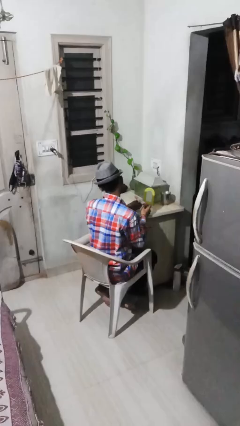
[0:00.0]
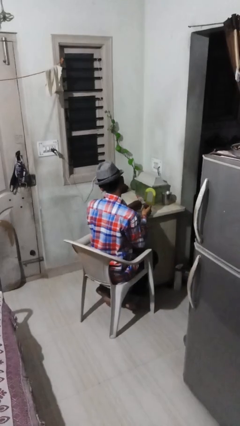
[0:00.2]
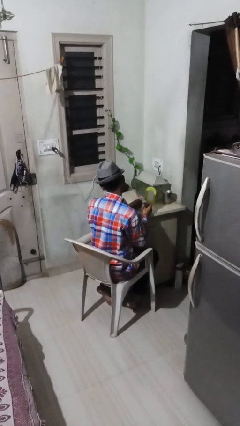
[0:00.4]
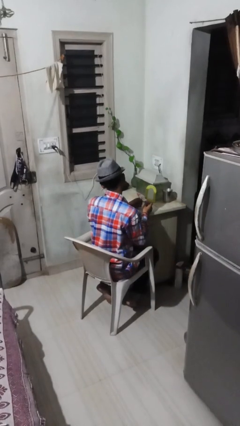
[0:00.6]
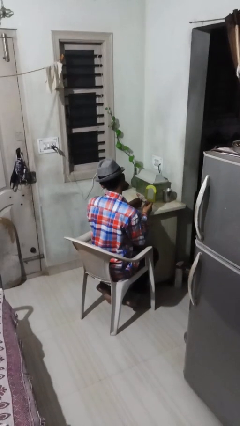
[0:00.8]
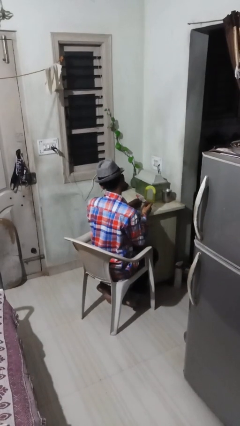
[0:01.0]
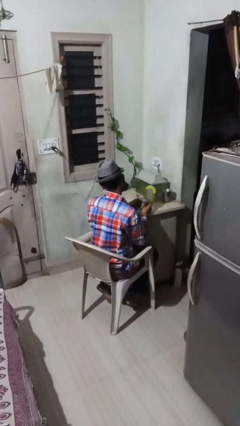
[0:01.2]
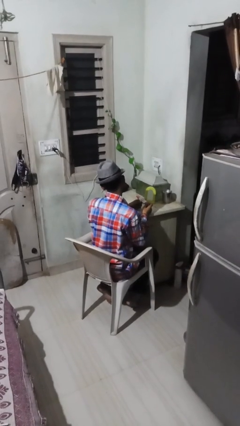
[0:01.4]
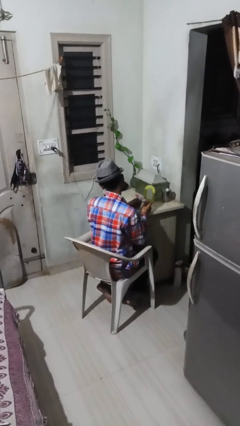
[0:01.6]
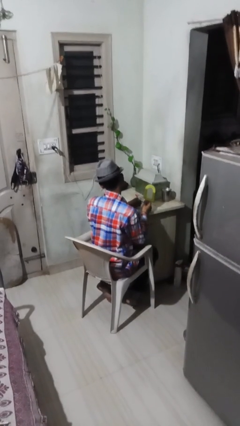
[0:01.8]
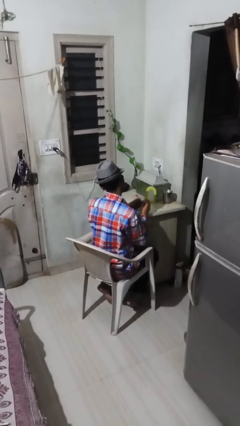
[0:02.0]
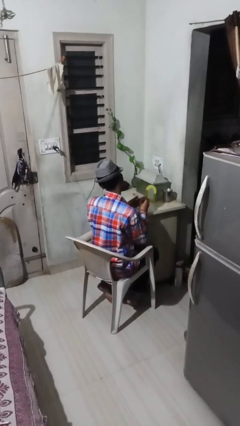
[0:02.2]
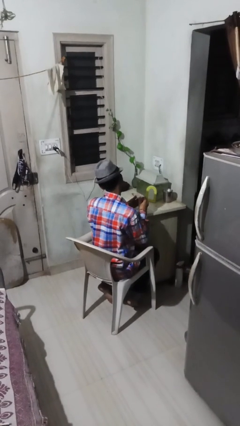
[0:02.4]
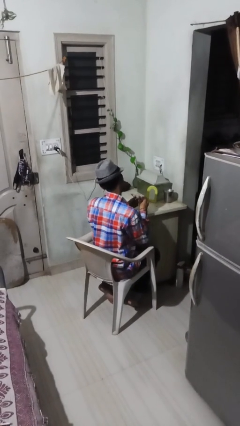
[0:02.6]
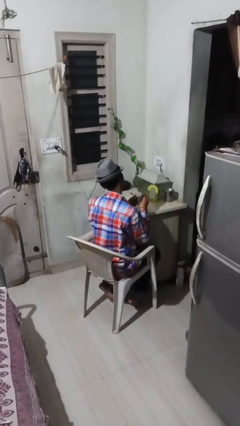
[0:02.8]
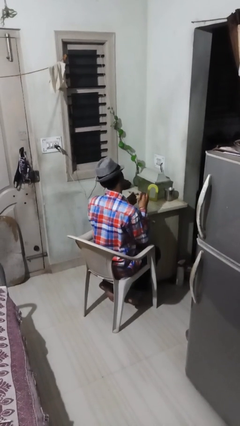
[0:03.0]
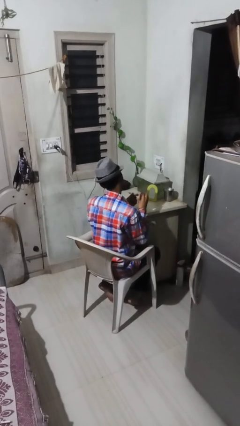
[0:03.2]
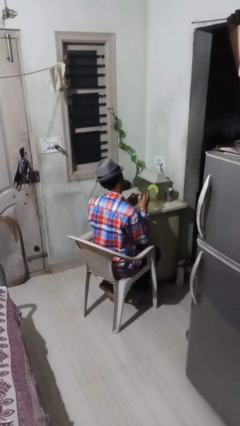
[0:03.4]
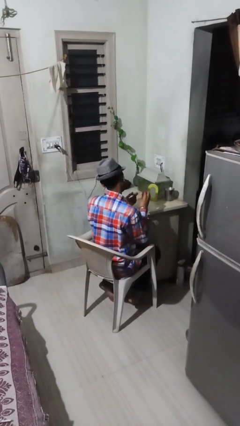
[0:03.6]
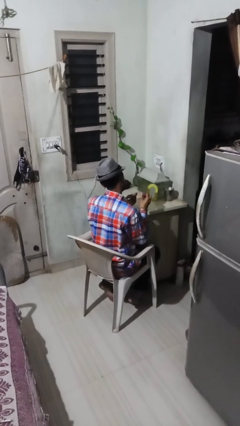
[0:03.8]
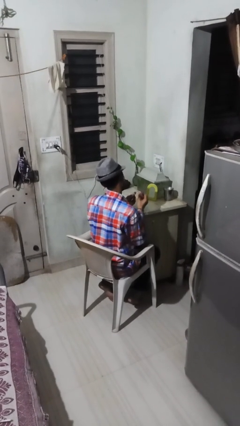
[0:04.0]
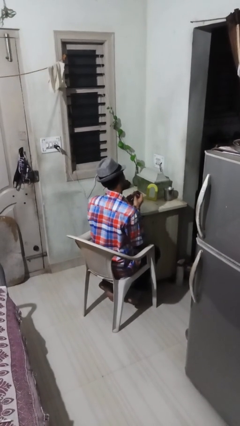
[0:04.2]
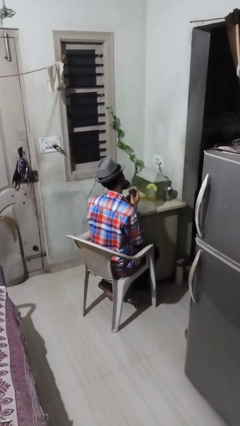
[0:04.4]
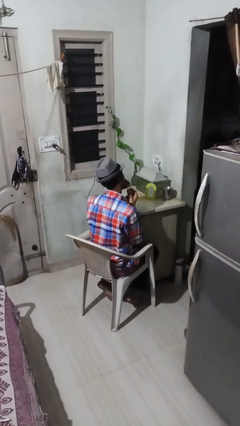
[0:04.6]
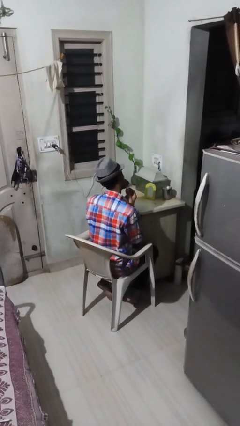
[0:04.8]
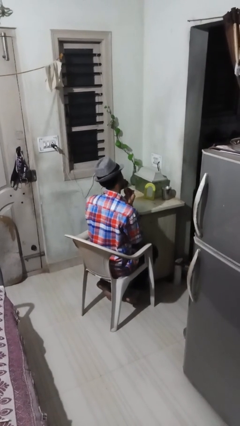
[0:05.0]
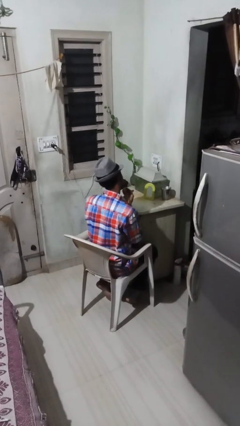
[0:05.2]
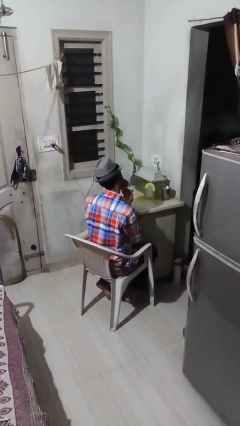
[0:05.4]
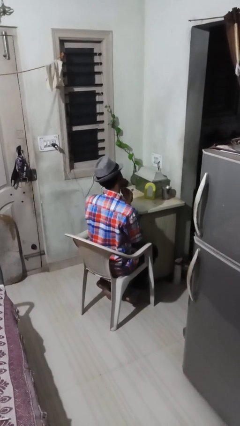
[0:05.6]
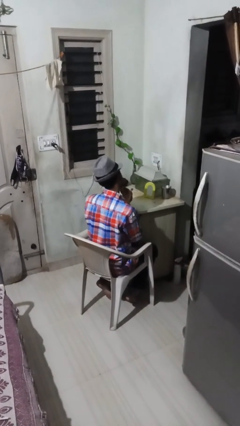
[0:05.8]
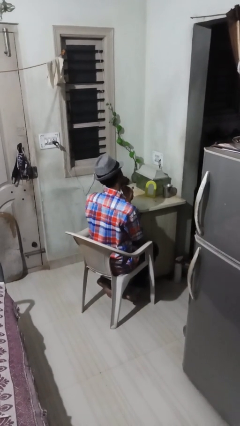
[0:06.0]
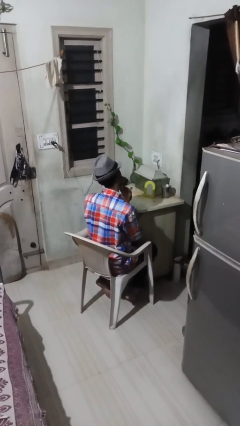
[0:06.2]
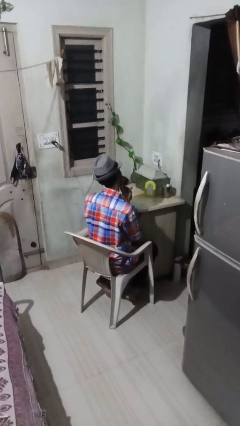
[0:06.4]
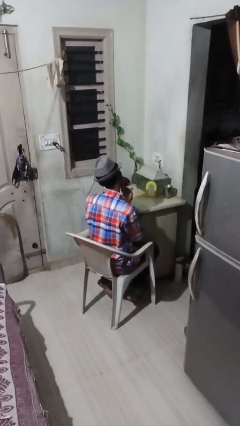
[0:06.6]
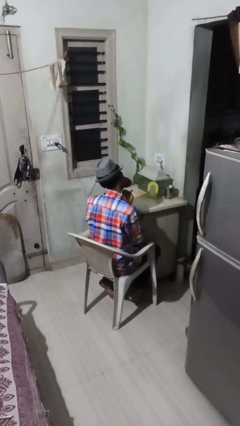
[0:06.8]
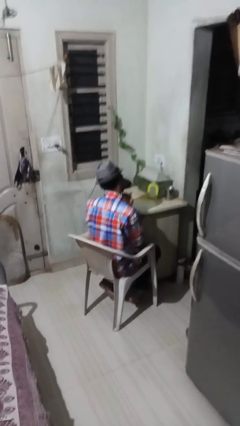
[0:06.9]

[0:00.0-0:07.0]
person applies lip makeup

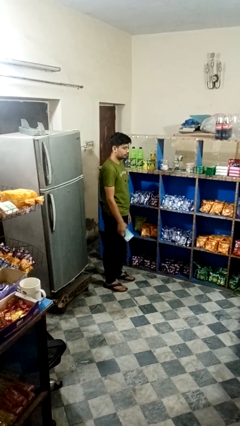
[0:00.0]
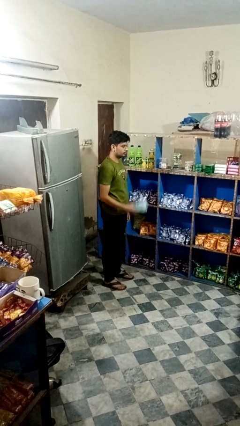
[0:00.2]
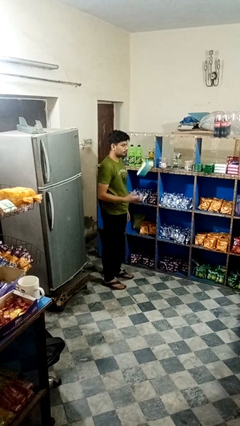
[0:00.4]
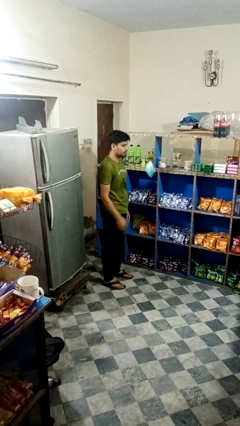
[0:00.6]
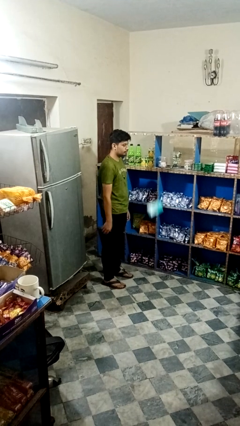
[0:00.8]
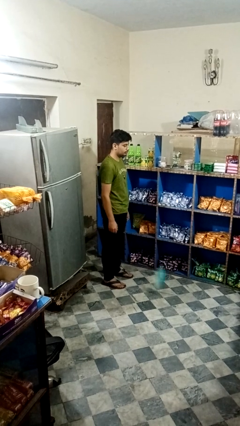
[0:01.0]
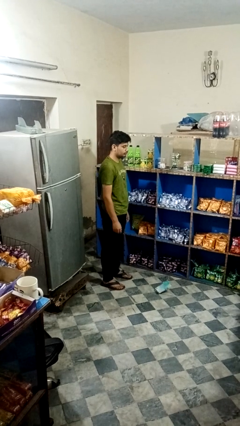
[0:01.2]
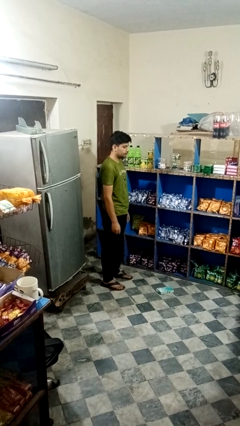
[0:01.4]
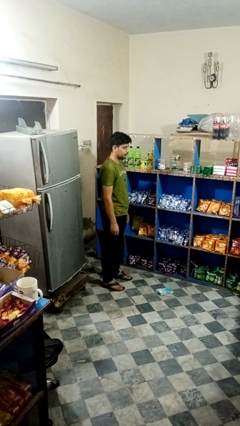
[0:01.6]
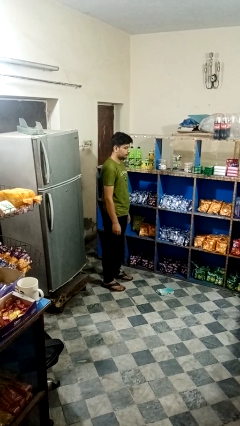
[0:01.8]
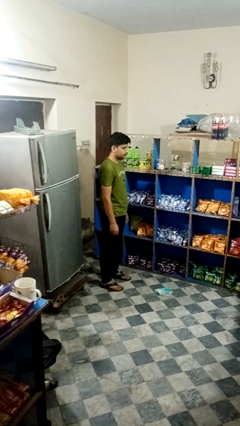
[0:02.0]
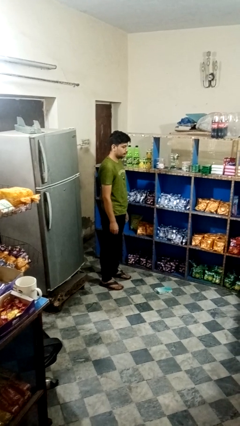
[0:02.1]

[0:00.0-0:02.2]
person throws object into air

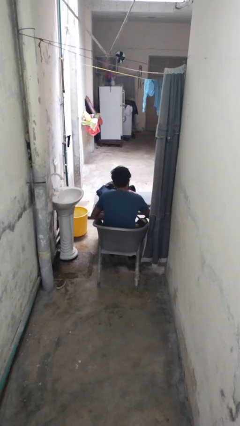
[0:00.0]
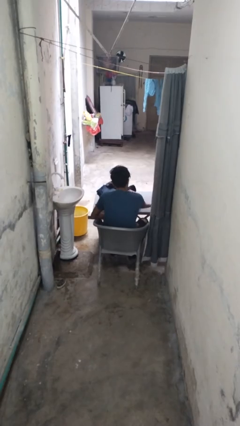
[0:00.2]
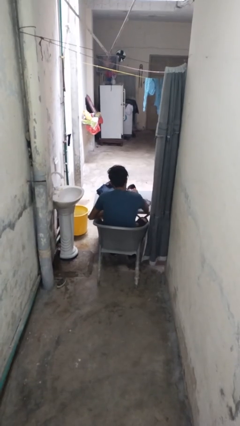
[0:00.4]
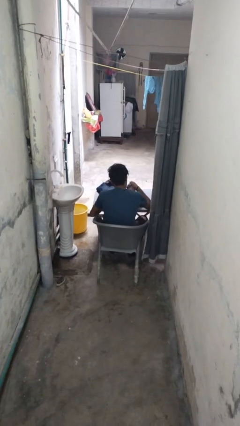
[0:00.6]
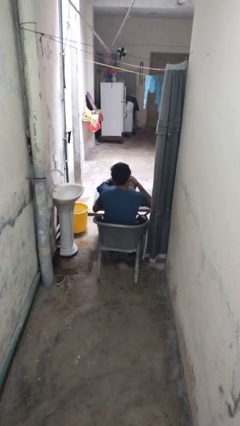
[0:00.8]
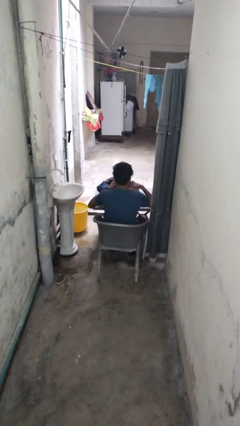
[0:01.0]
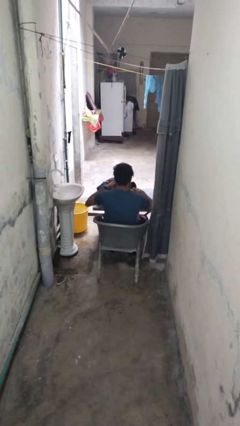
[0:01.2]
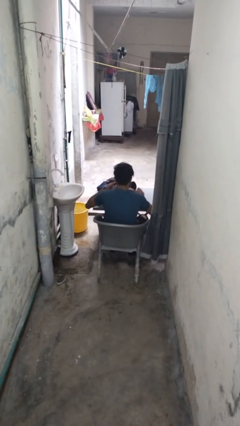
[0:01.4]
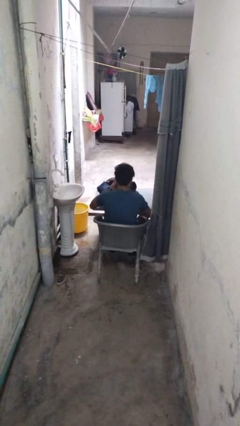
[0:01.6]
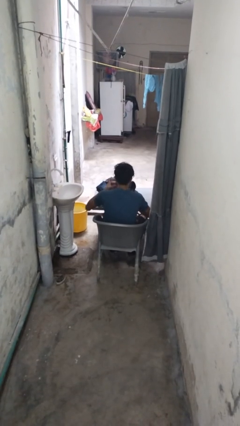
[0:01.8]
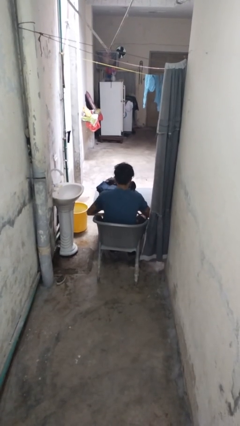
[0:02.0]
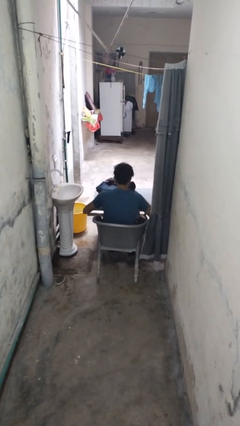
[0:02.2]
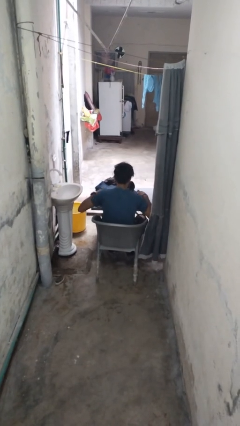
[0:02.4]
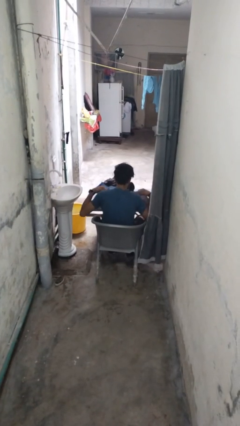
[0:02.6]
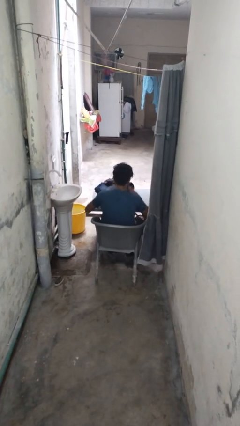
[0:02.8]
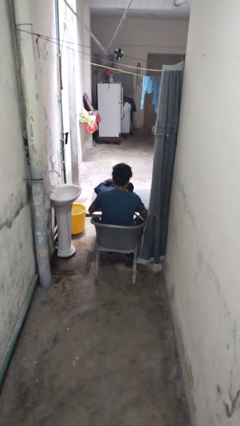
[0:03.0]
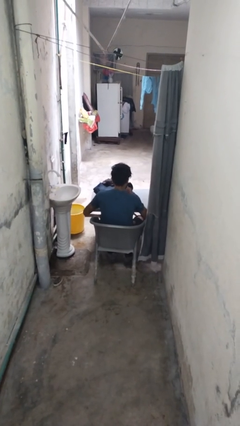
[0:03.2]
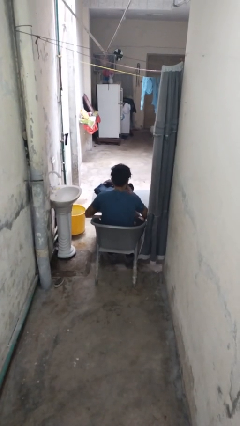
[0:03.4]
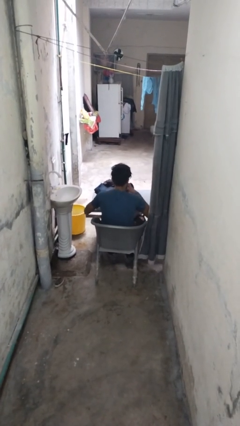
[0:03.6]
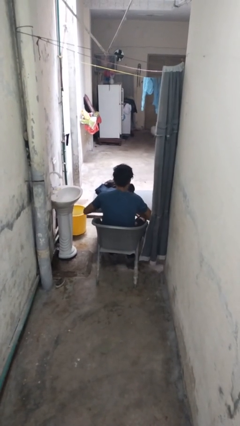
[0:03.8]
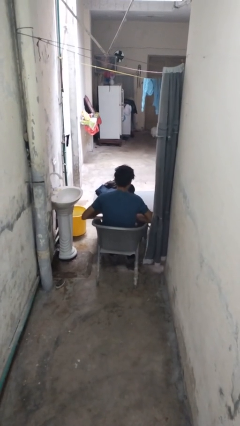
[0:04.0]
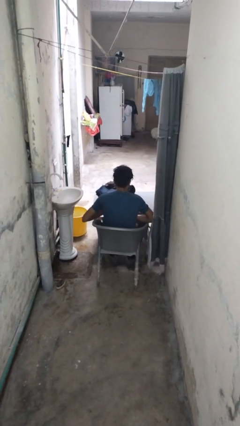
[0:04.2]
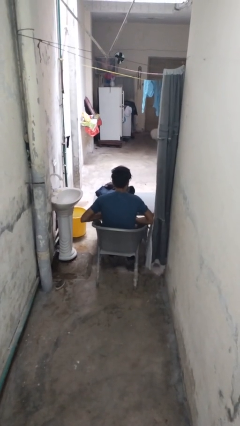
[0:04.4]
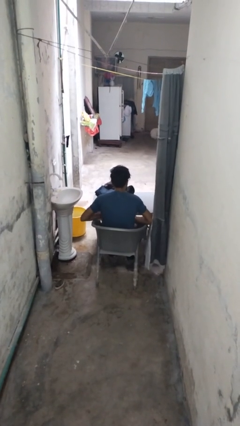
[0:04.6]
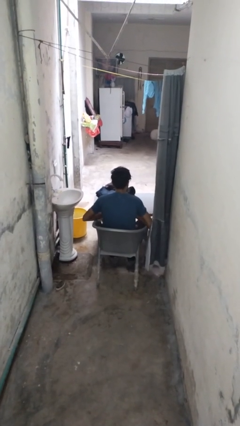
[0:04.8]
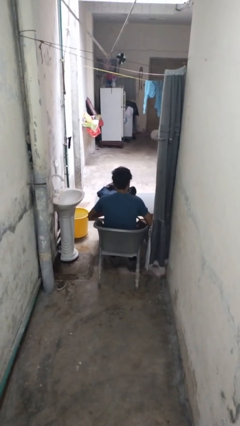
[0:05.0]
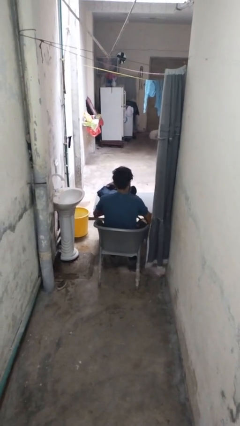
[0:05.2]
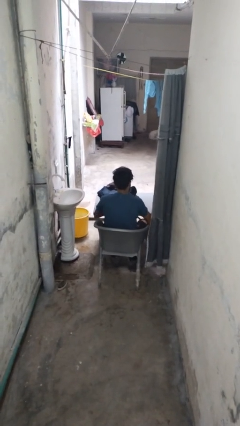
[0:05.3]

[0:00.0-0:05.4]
person folds shirt

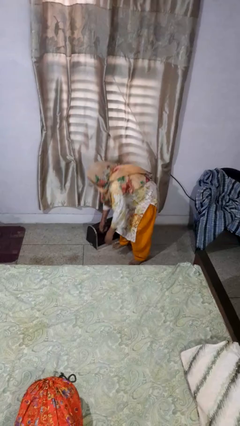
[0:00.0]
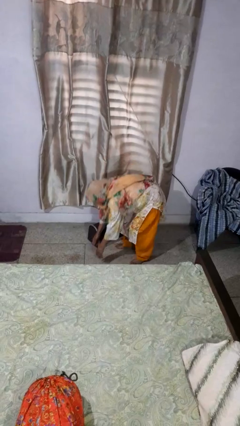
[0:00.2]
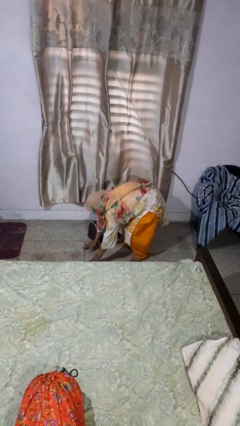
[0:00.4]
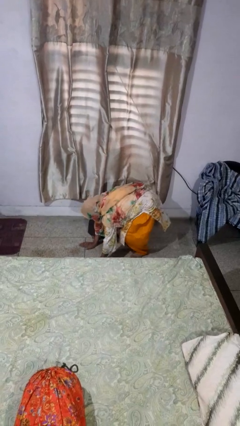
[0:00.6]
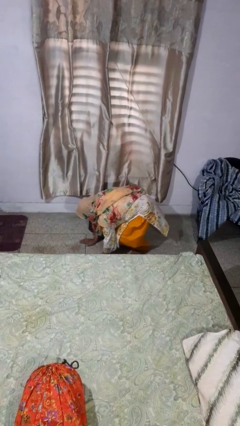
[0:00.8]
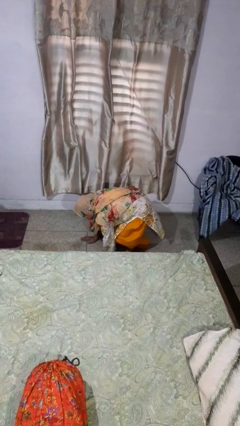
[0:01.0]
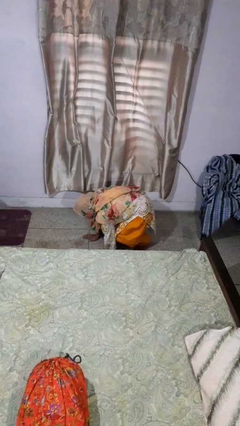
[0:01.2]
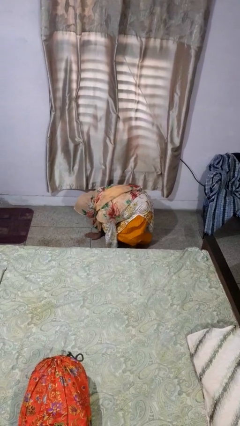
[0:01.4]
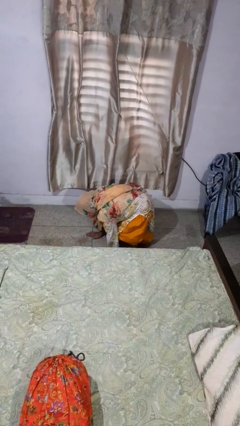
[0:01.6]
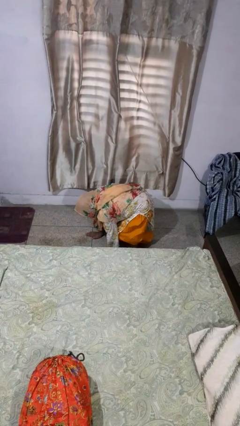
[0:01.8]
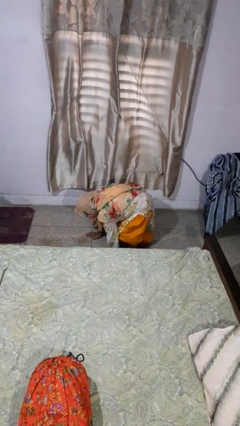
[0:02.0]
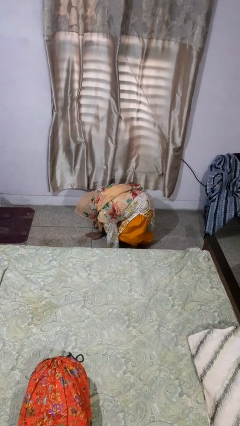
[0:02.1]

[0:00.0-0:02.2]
person lies down on floor

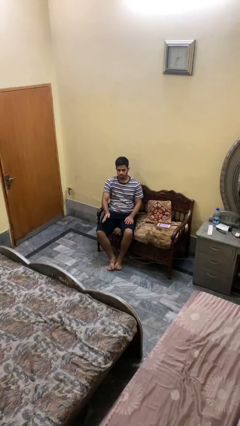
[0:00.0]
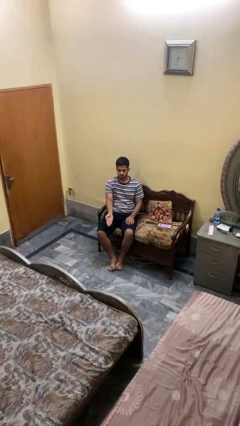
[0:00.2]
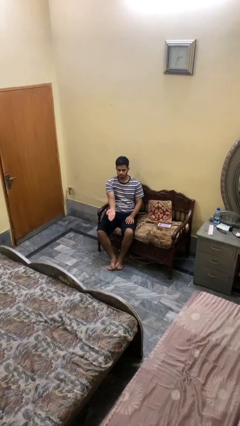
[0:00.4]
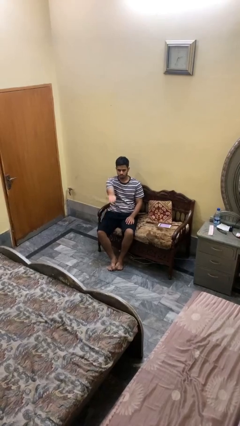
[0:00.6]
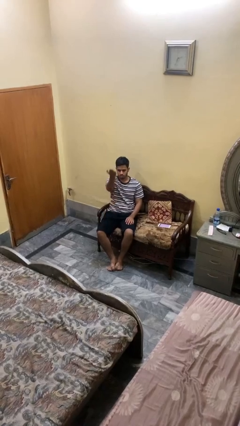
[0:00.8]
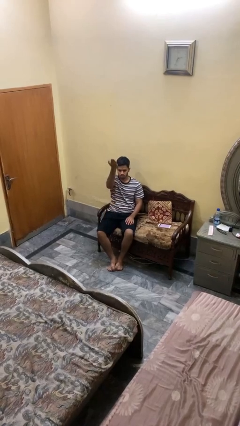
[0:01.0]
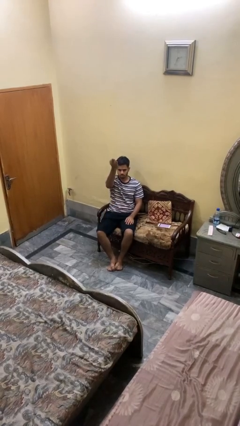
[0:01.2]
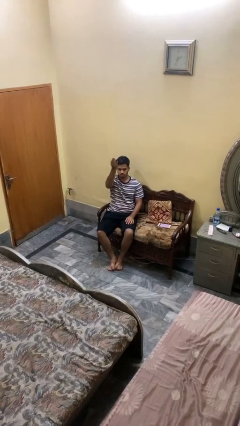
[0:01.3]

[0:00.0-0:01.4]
person gestures swipe up
